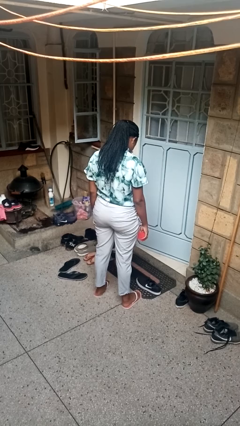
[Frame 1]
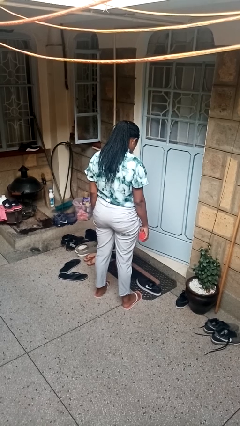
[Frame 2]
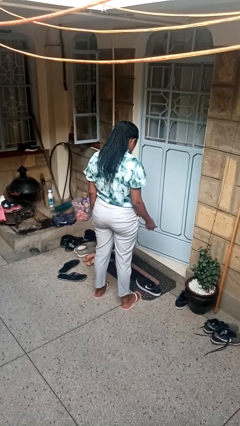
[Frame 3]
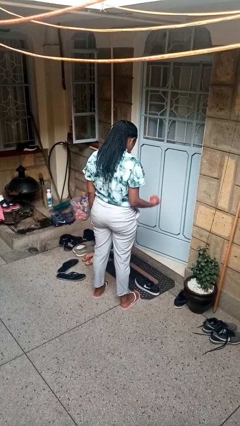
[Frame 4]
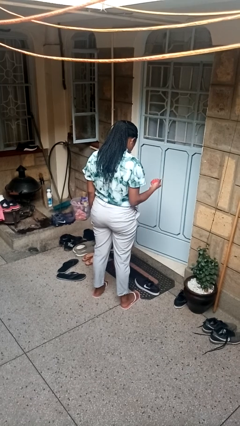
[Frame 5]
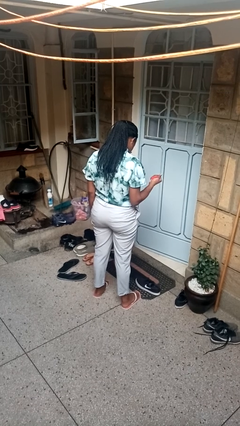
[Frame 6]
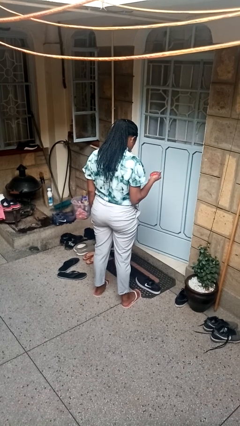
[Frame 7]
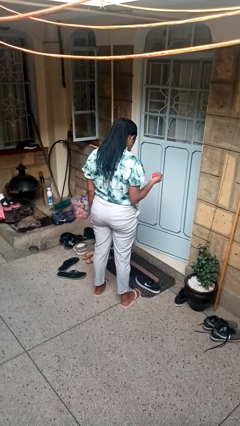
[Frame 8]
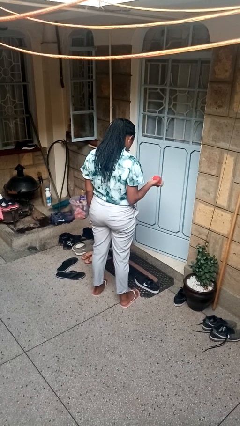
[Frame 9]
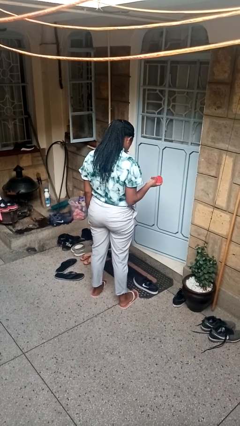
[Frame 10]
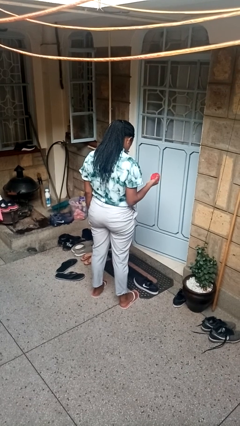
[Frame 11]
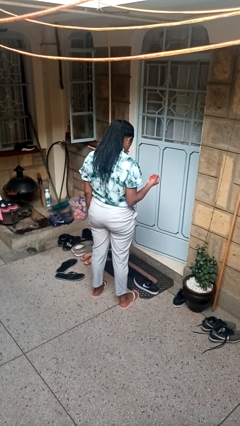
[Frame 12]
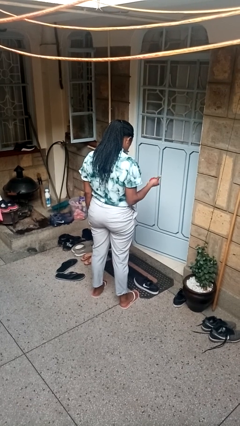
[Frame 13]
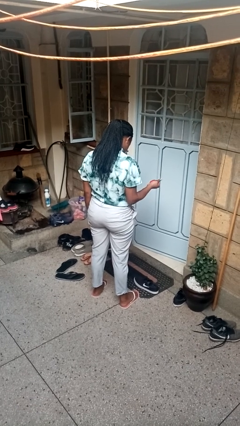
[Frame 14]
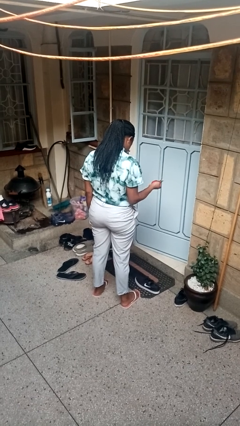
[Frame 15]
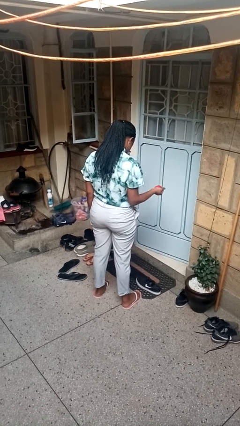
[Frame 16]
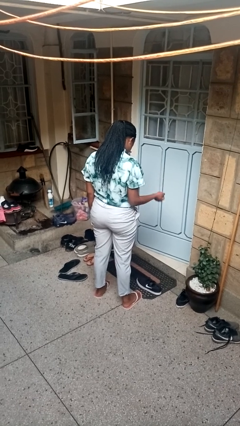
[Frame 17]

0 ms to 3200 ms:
person squeezes object

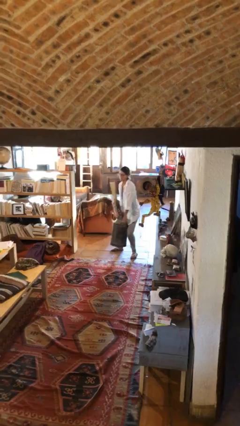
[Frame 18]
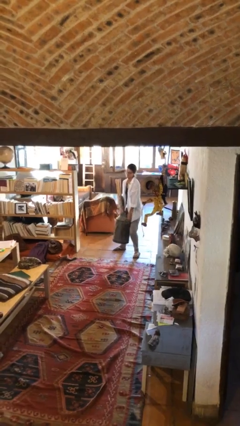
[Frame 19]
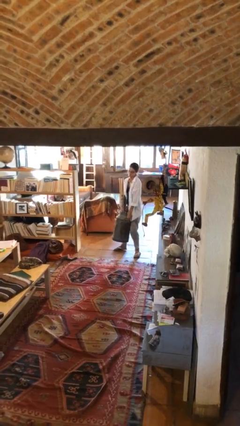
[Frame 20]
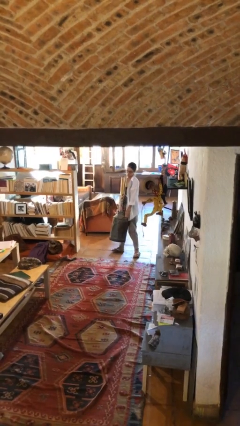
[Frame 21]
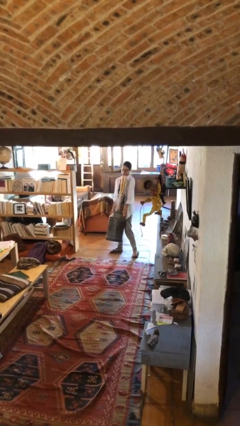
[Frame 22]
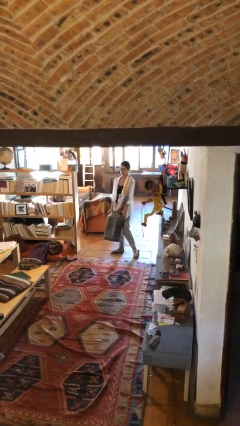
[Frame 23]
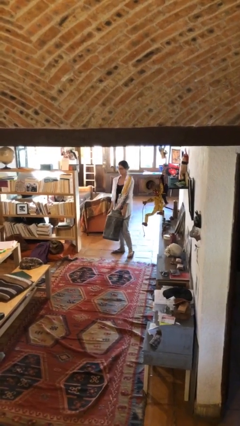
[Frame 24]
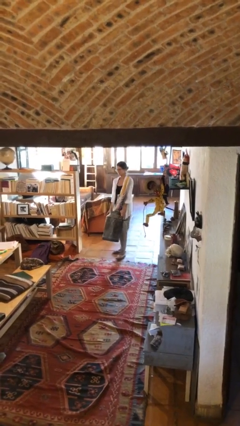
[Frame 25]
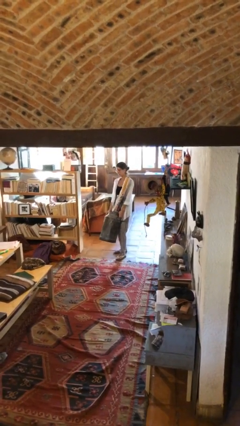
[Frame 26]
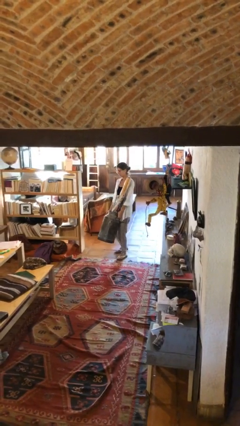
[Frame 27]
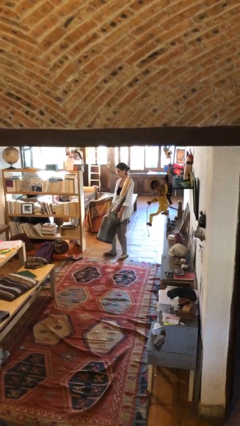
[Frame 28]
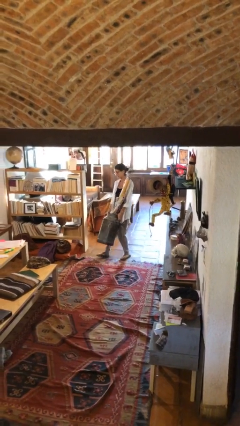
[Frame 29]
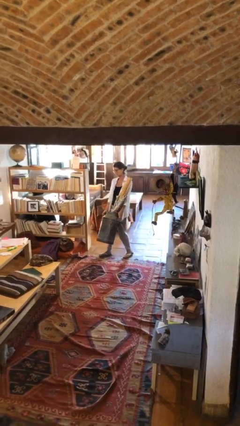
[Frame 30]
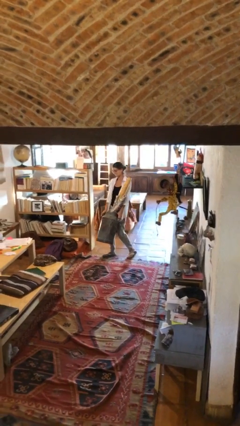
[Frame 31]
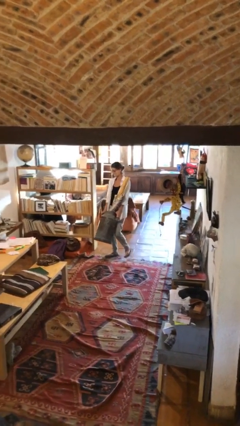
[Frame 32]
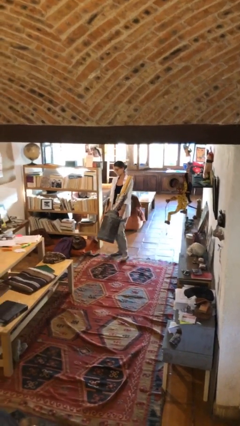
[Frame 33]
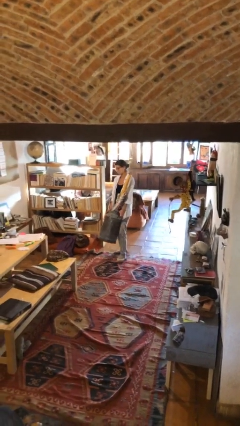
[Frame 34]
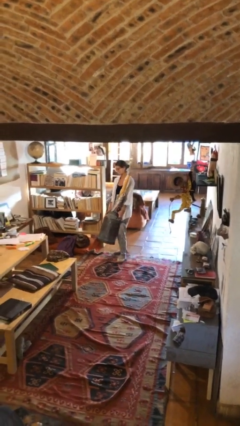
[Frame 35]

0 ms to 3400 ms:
person carries heavy object

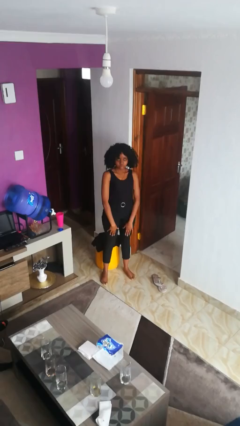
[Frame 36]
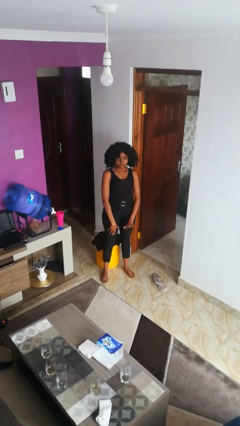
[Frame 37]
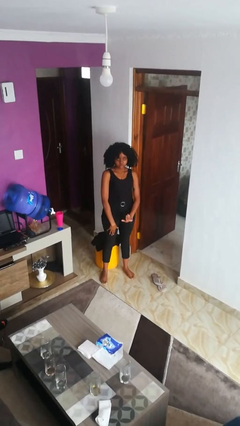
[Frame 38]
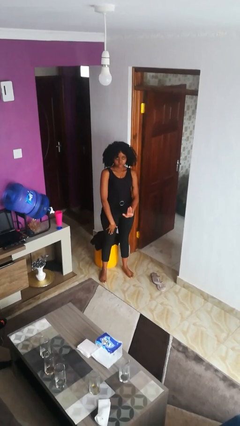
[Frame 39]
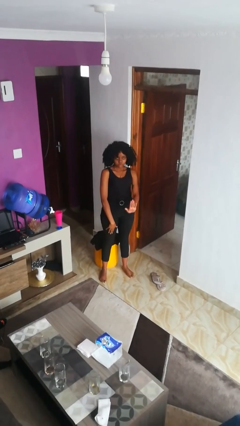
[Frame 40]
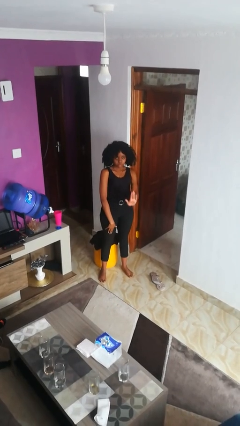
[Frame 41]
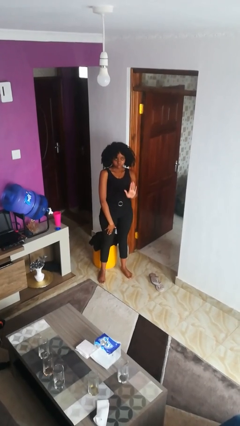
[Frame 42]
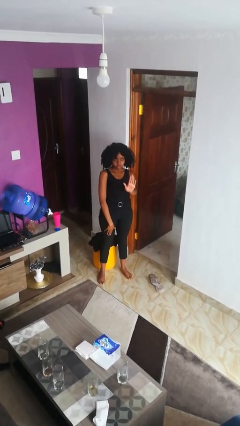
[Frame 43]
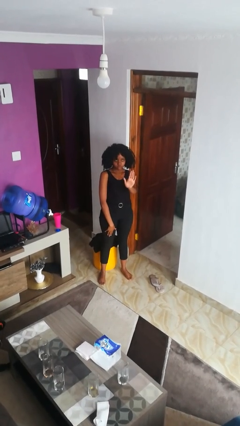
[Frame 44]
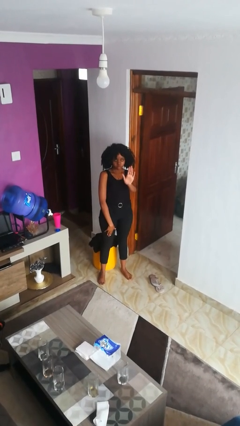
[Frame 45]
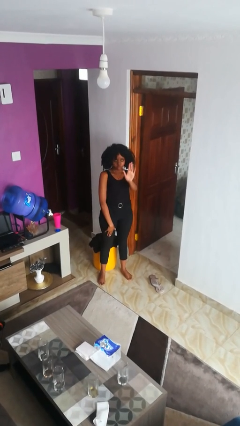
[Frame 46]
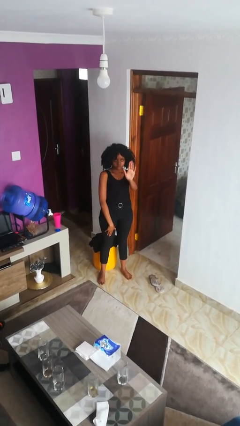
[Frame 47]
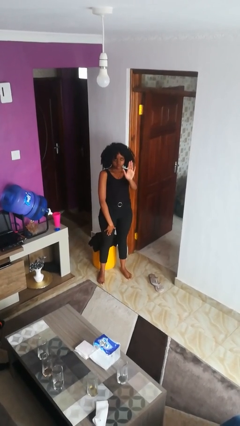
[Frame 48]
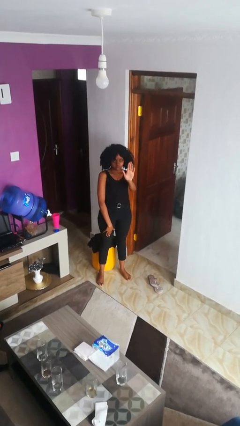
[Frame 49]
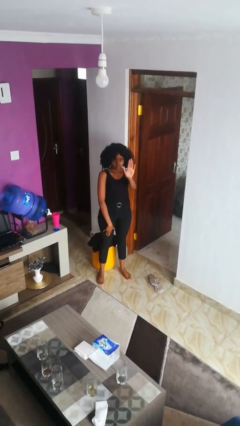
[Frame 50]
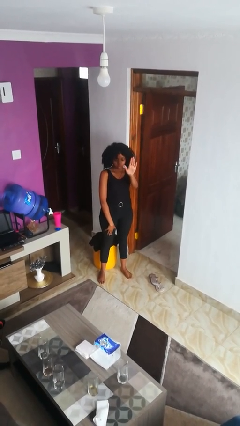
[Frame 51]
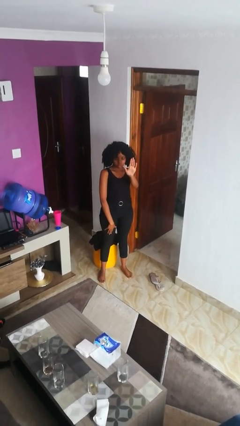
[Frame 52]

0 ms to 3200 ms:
person gestures swipe up

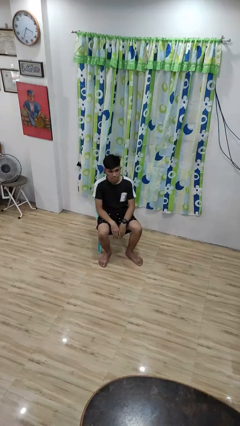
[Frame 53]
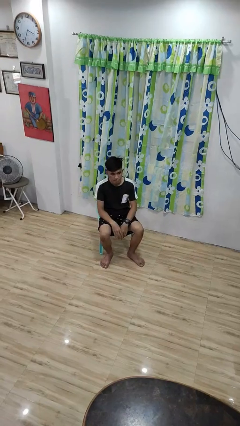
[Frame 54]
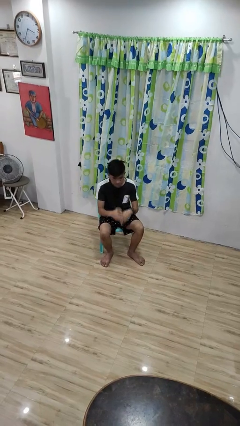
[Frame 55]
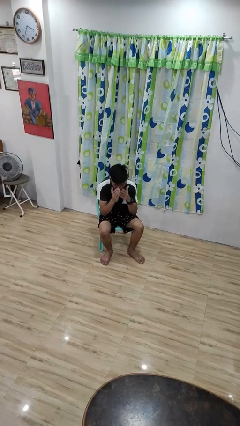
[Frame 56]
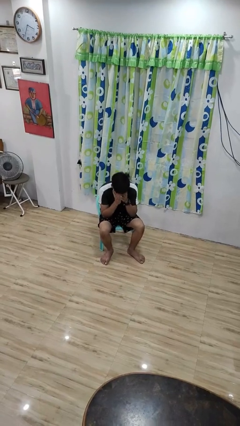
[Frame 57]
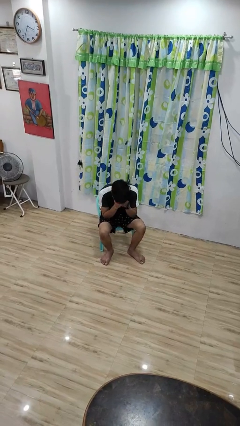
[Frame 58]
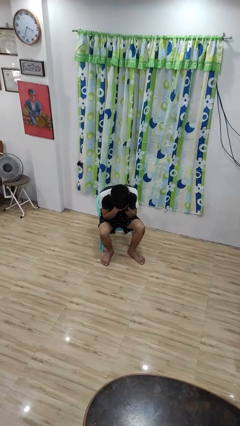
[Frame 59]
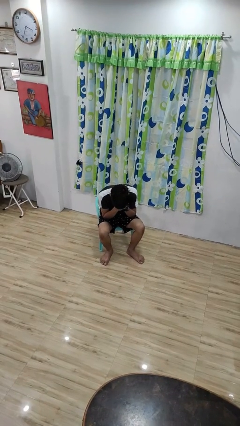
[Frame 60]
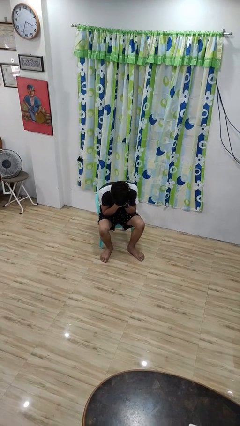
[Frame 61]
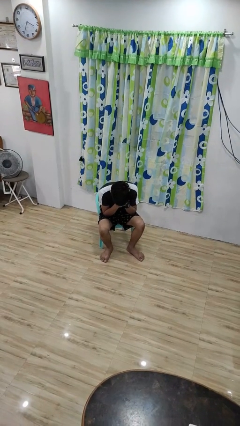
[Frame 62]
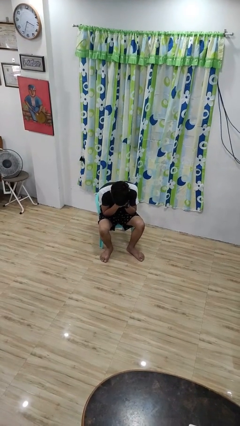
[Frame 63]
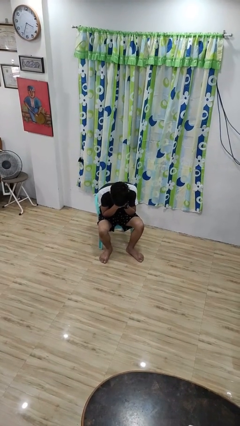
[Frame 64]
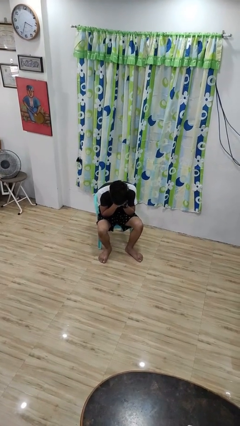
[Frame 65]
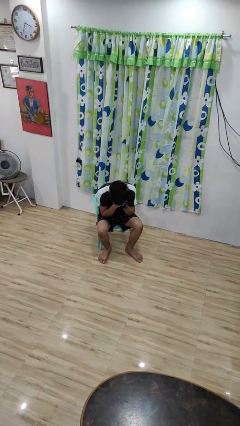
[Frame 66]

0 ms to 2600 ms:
person covers face with hands

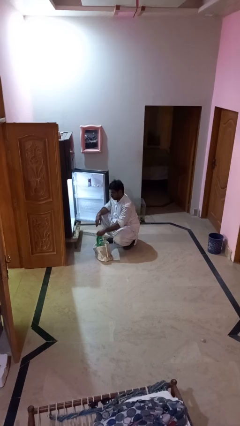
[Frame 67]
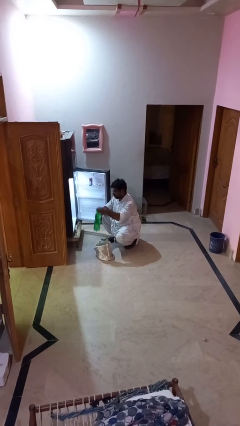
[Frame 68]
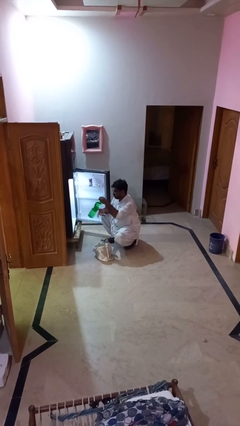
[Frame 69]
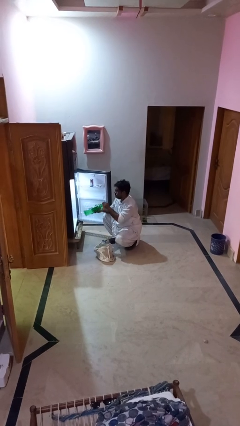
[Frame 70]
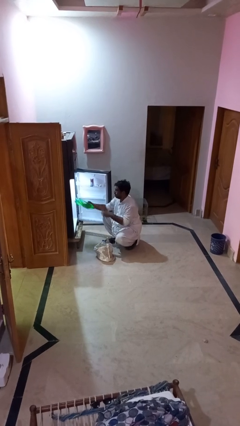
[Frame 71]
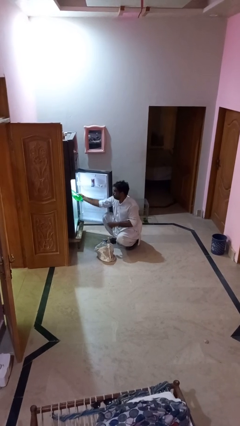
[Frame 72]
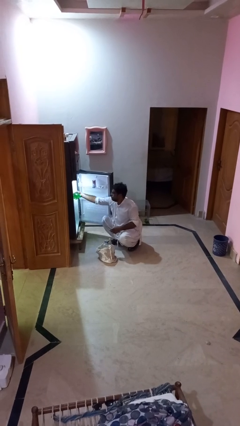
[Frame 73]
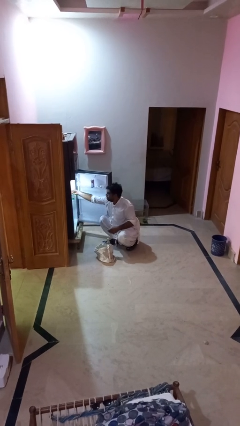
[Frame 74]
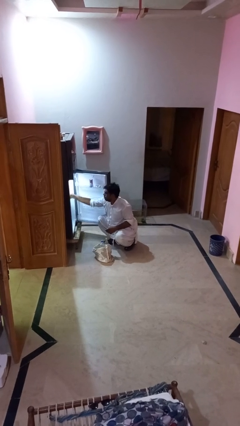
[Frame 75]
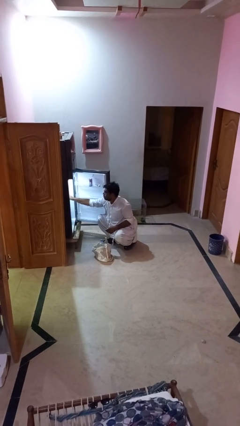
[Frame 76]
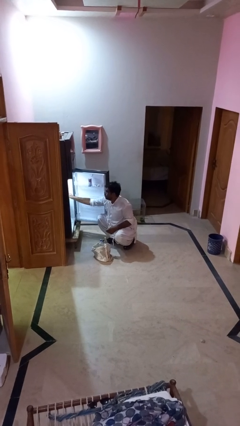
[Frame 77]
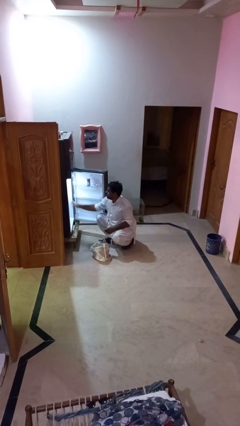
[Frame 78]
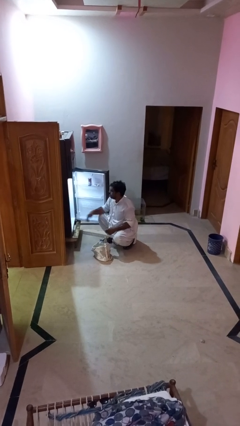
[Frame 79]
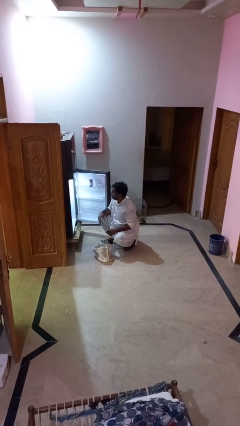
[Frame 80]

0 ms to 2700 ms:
person loads groceries into refrigerator

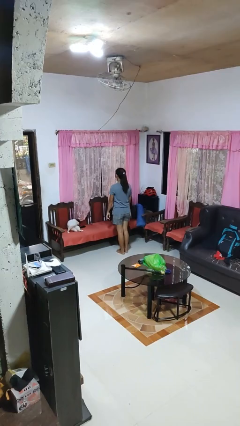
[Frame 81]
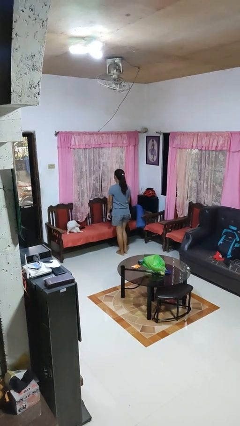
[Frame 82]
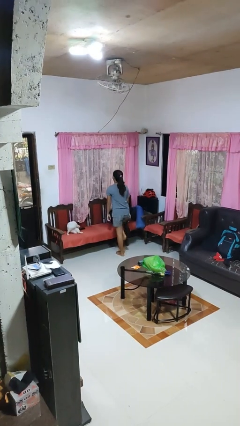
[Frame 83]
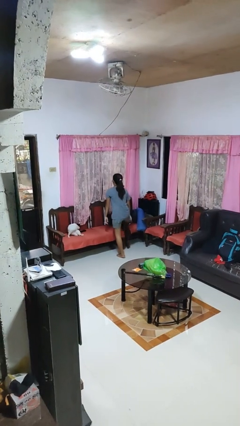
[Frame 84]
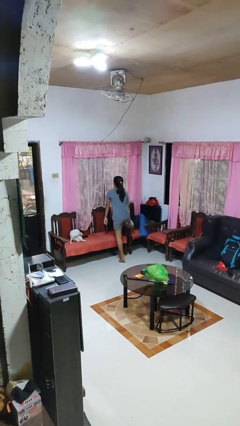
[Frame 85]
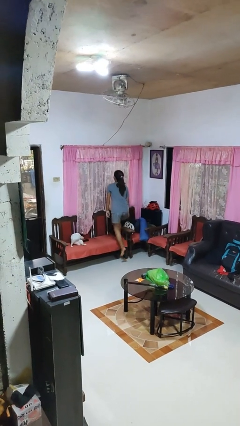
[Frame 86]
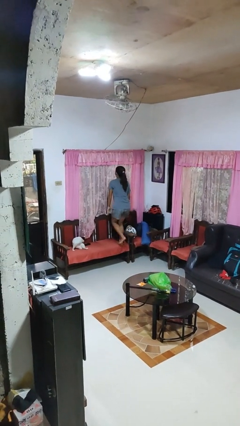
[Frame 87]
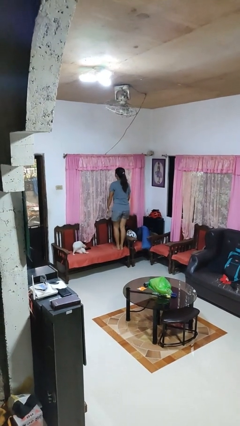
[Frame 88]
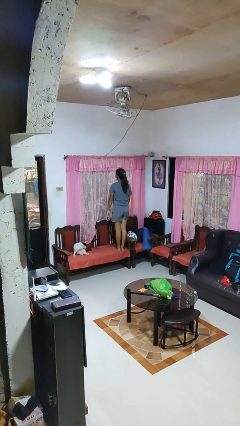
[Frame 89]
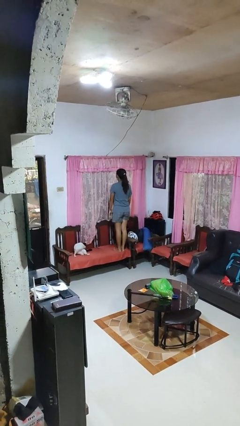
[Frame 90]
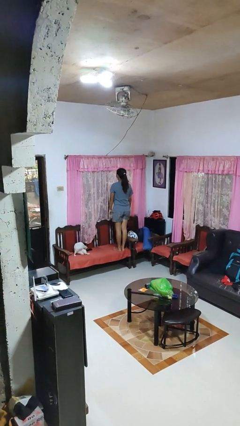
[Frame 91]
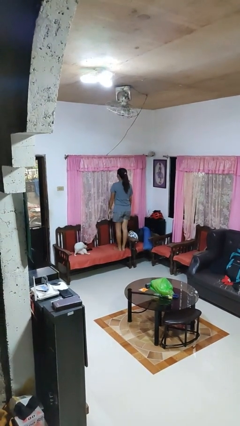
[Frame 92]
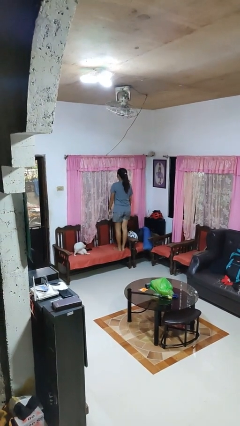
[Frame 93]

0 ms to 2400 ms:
person climbs on chair
